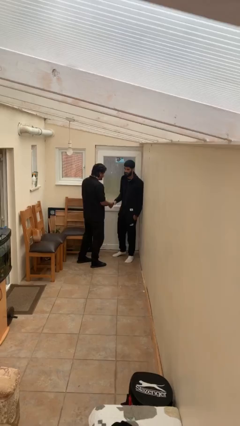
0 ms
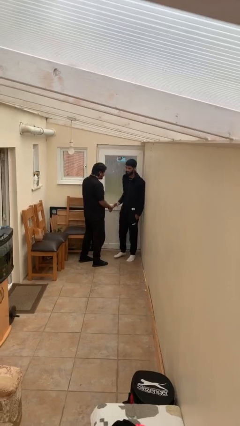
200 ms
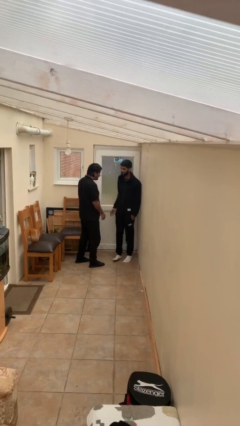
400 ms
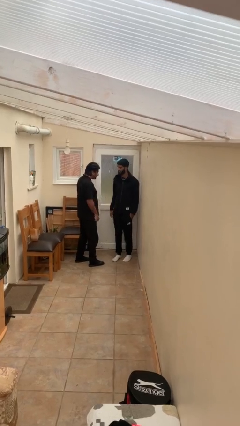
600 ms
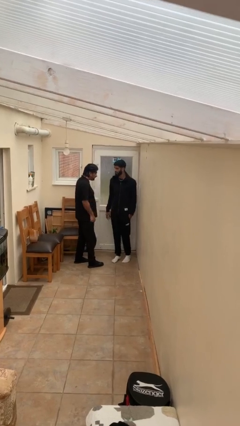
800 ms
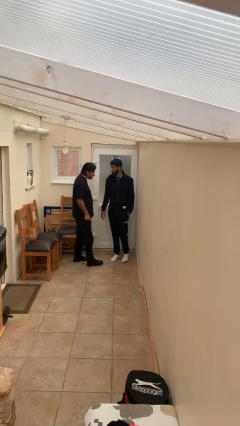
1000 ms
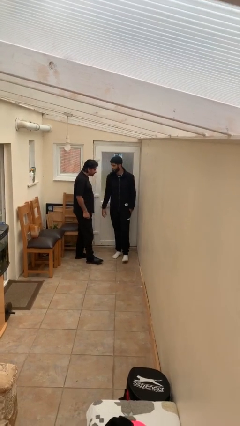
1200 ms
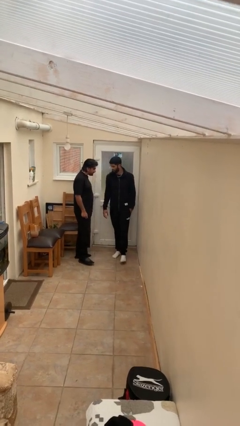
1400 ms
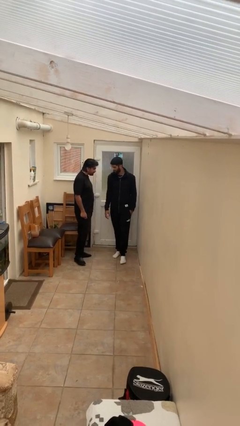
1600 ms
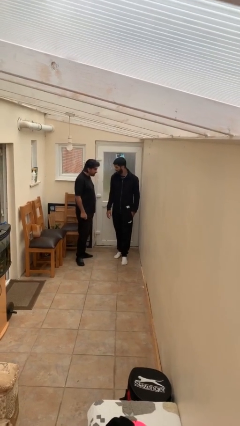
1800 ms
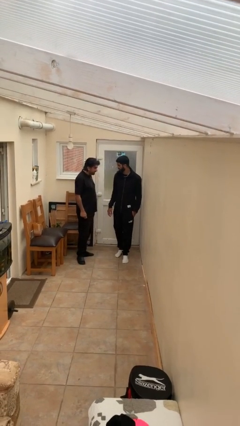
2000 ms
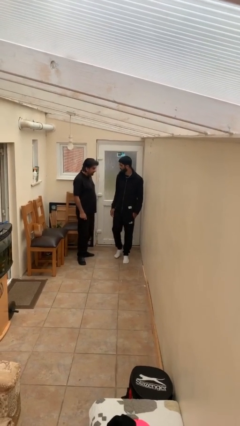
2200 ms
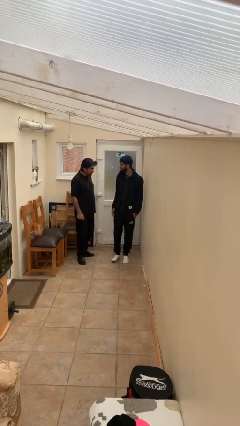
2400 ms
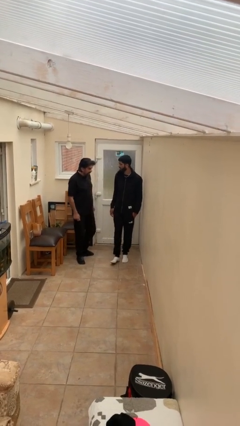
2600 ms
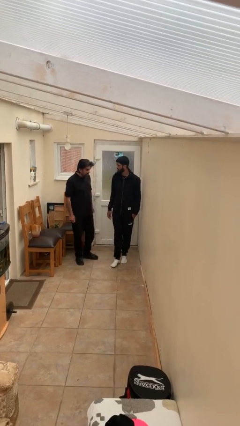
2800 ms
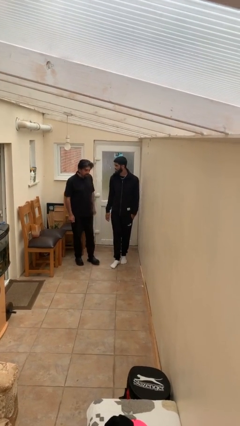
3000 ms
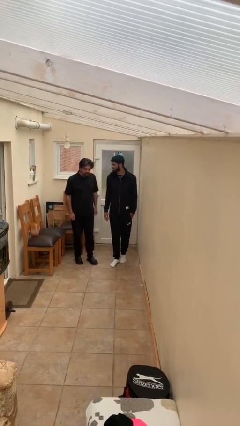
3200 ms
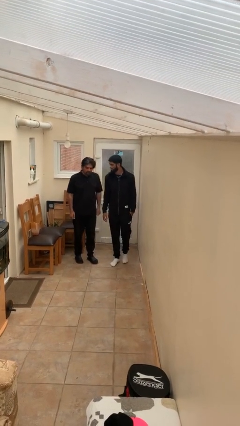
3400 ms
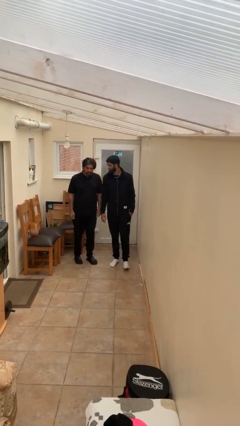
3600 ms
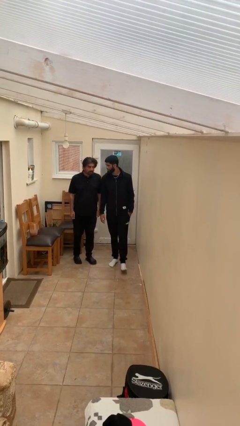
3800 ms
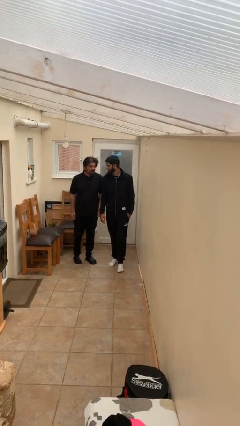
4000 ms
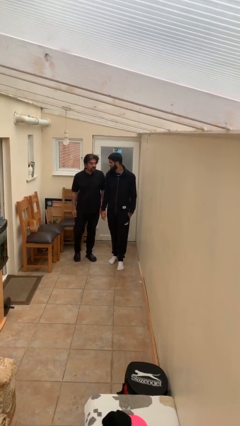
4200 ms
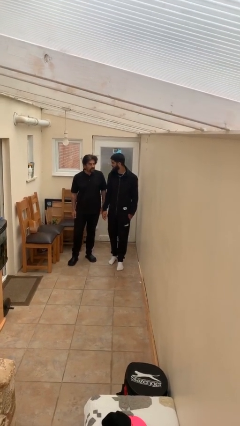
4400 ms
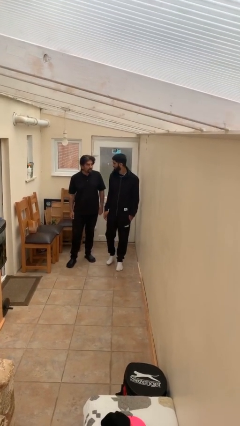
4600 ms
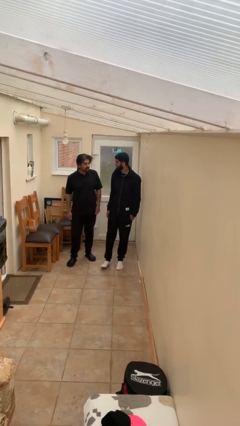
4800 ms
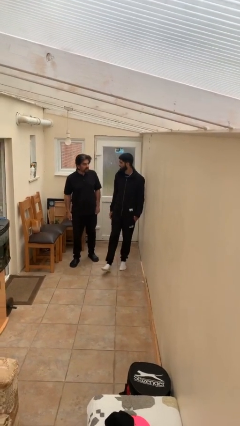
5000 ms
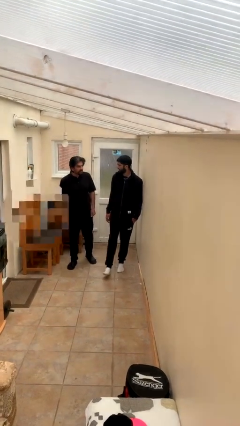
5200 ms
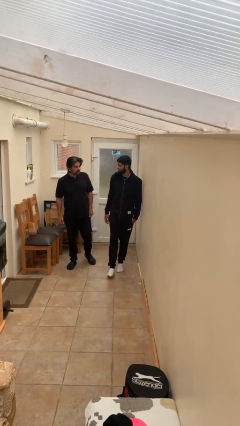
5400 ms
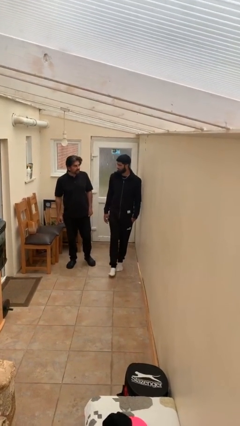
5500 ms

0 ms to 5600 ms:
person talks to person

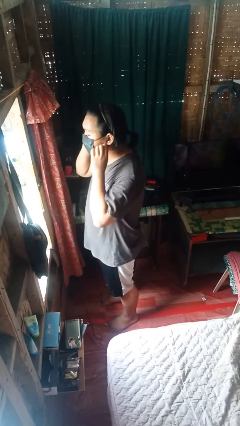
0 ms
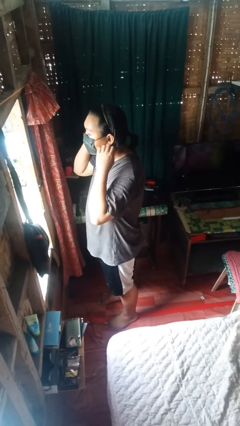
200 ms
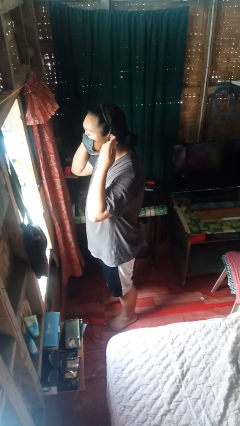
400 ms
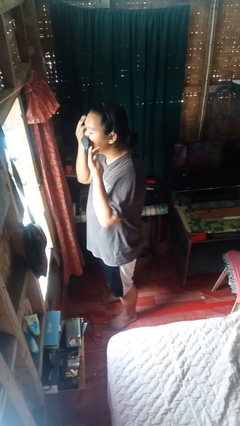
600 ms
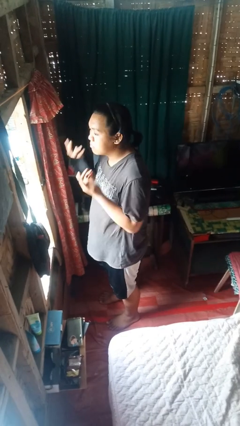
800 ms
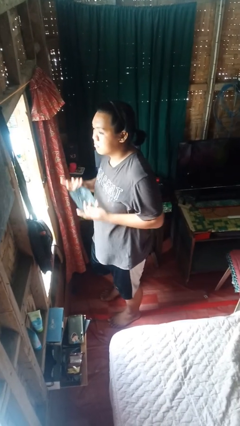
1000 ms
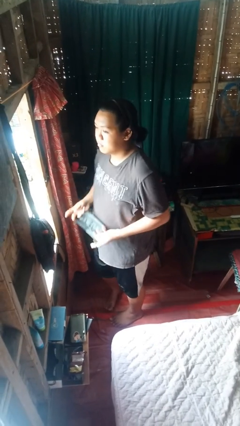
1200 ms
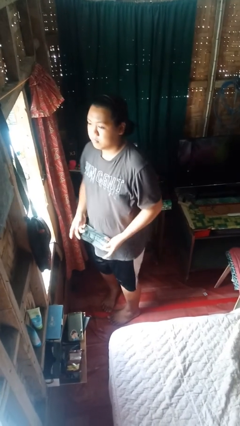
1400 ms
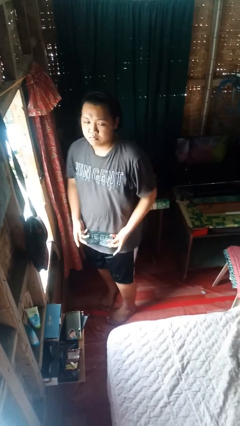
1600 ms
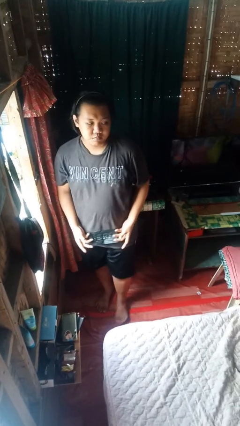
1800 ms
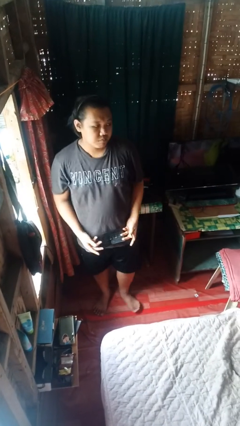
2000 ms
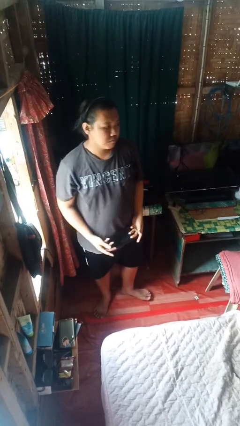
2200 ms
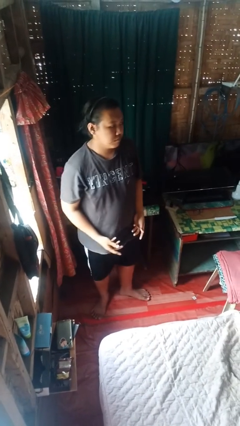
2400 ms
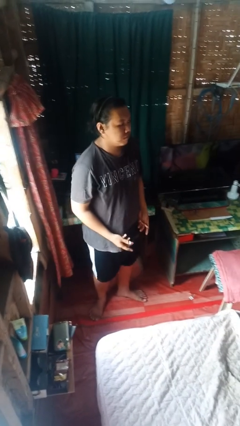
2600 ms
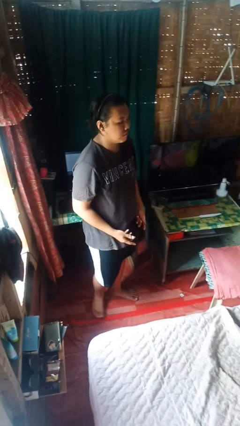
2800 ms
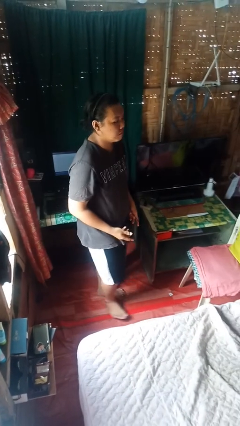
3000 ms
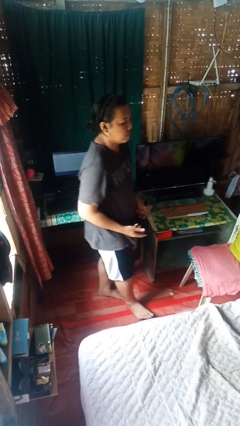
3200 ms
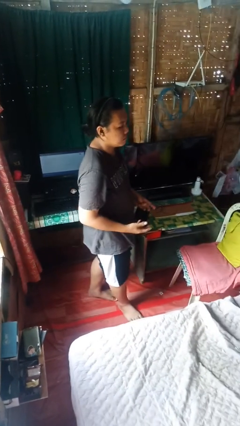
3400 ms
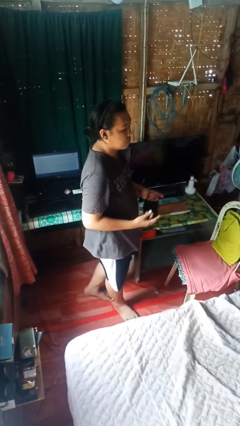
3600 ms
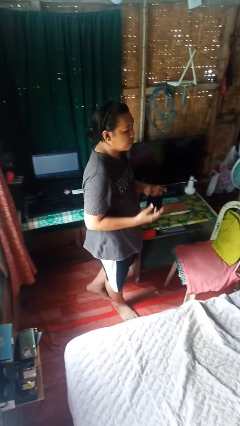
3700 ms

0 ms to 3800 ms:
person takes off facemask

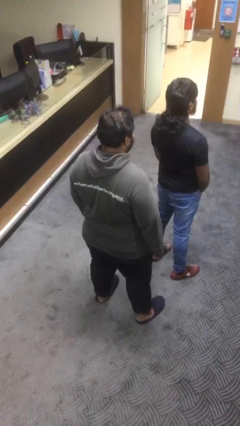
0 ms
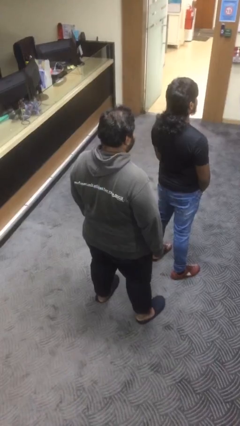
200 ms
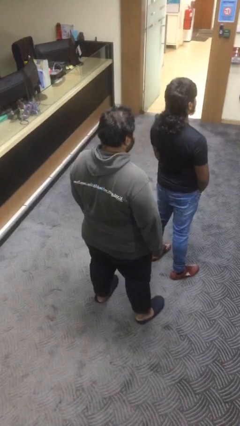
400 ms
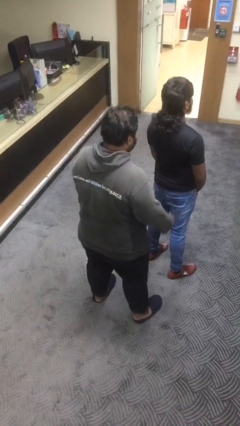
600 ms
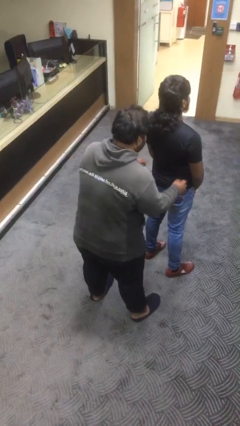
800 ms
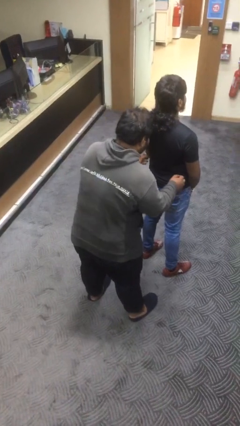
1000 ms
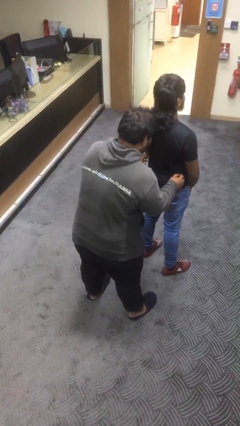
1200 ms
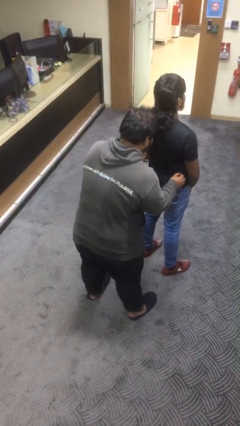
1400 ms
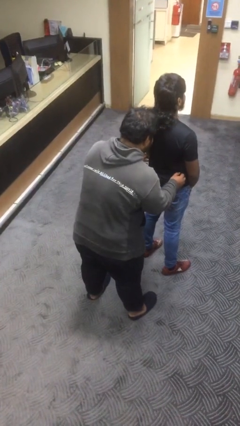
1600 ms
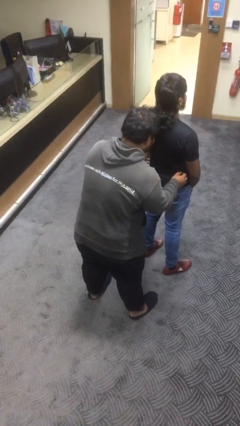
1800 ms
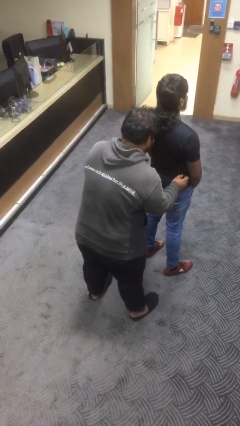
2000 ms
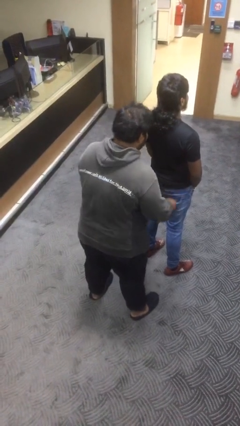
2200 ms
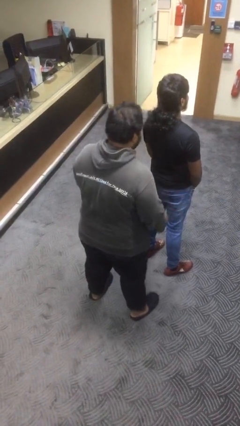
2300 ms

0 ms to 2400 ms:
person tickles person

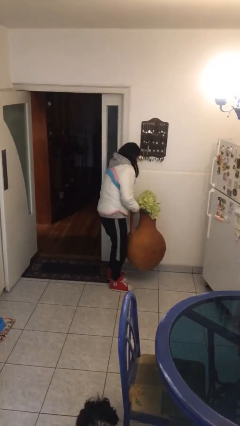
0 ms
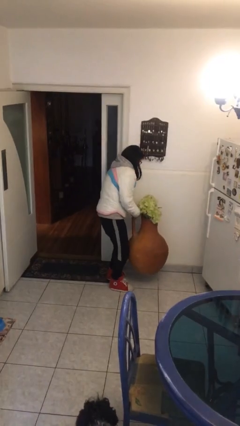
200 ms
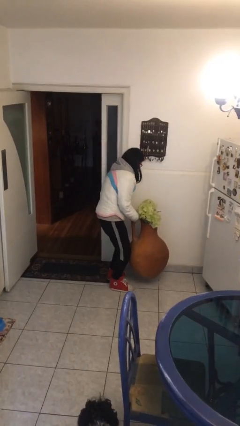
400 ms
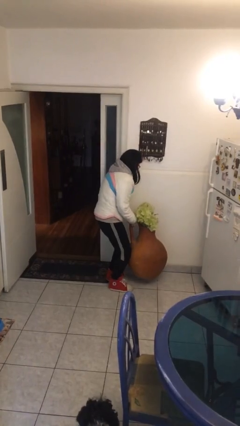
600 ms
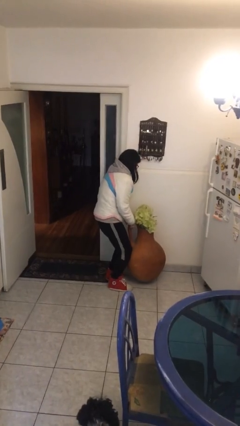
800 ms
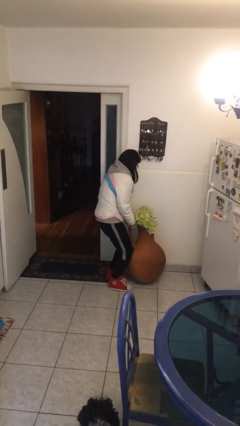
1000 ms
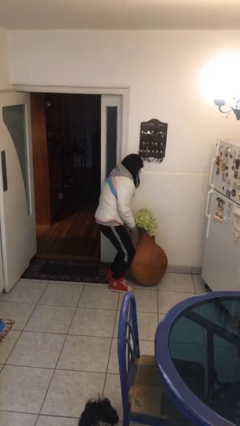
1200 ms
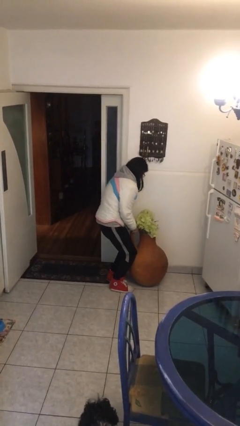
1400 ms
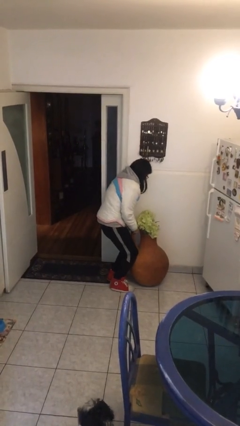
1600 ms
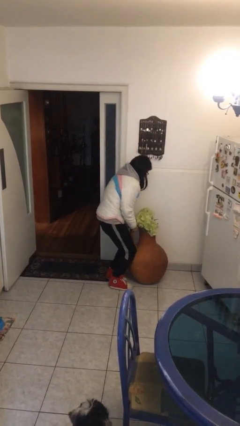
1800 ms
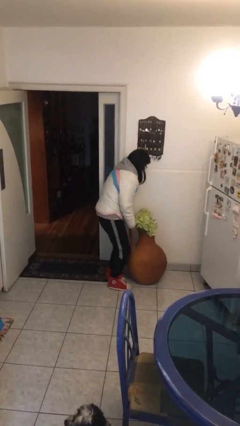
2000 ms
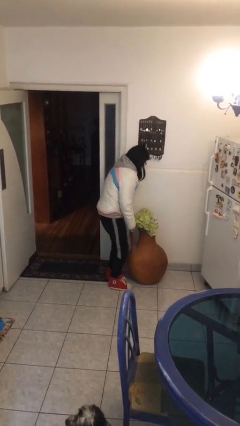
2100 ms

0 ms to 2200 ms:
person puts down object on floor

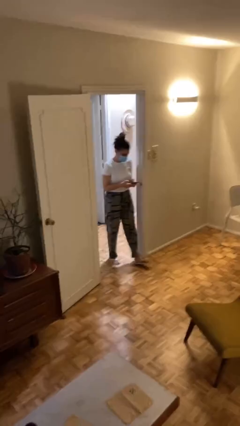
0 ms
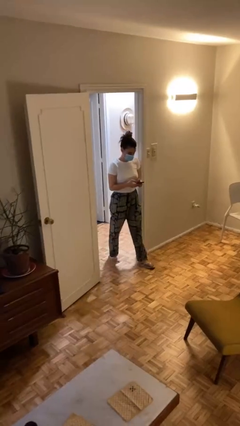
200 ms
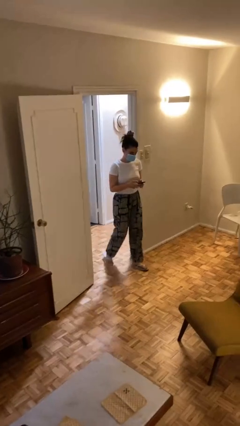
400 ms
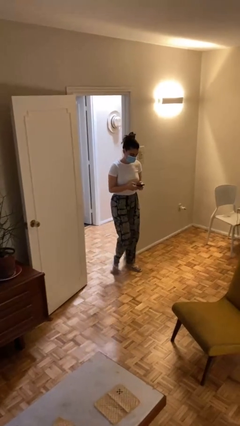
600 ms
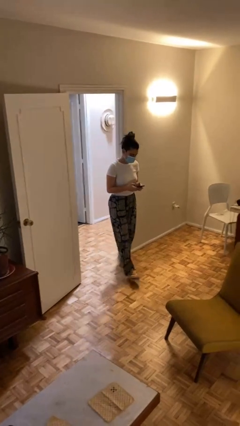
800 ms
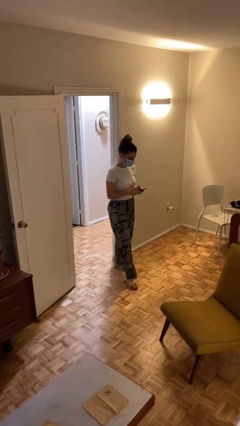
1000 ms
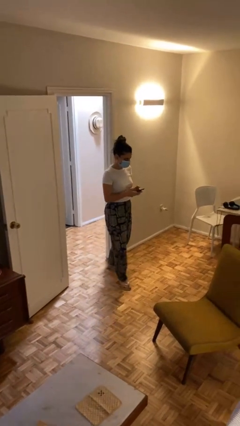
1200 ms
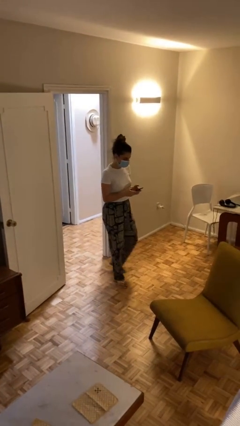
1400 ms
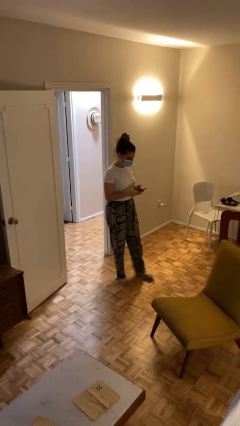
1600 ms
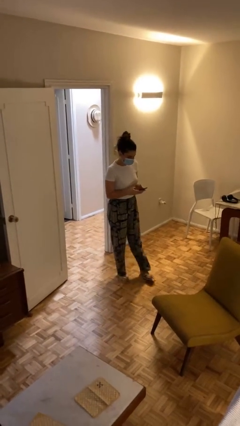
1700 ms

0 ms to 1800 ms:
person enters scene through structure

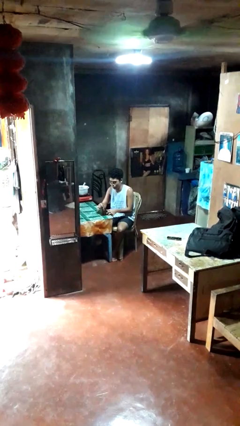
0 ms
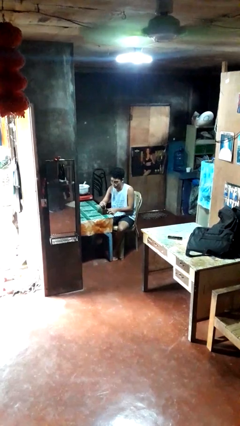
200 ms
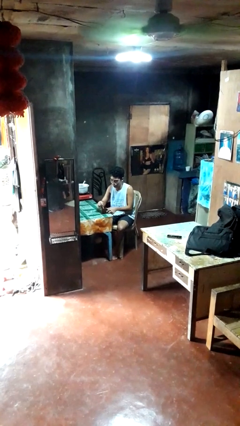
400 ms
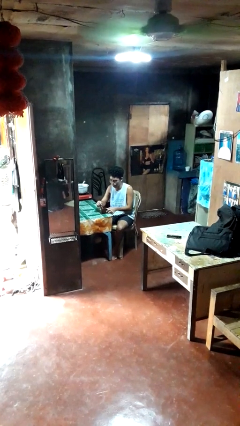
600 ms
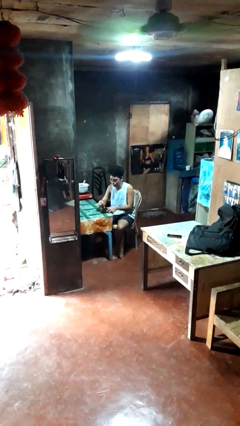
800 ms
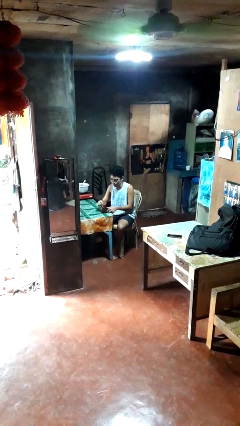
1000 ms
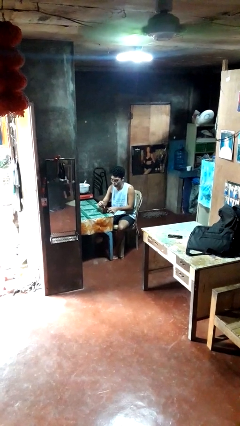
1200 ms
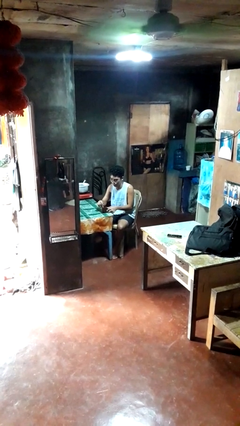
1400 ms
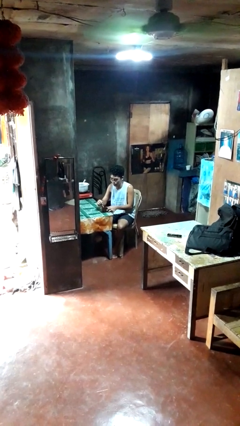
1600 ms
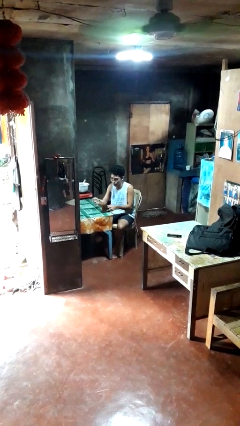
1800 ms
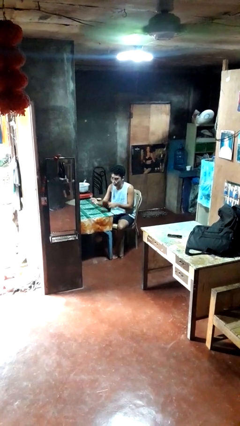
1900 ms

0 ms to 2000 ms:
person stirs mug

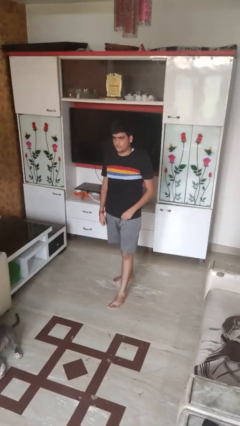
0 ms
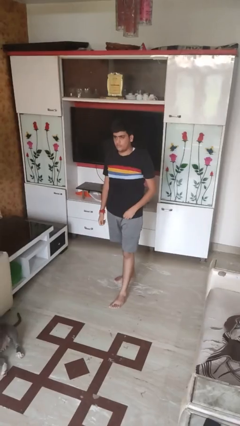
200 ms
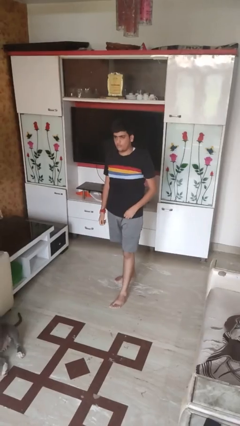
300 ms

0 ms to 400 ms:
person punches
